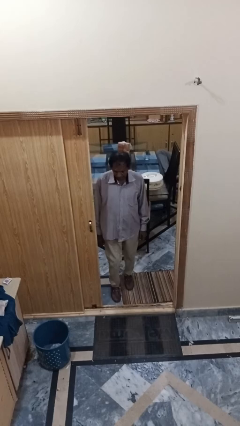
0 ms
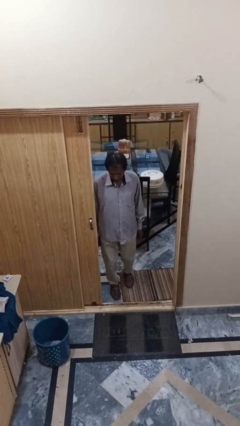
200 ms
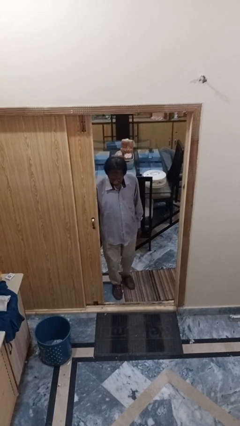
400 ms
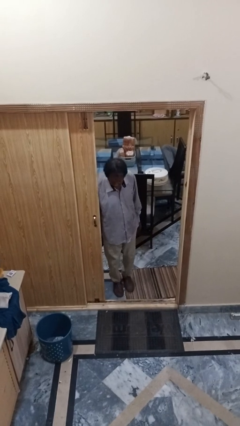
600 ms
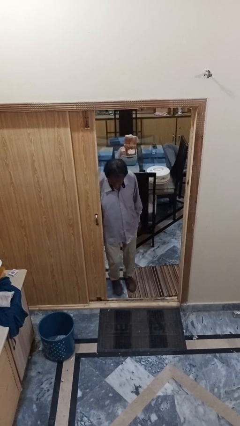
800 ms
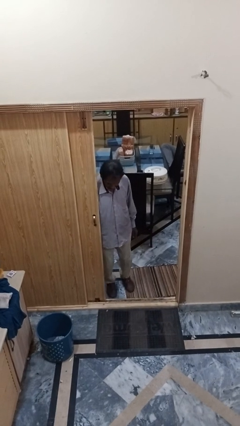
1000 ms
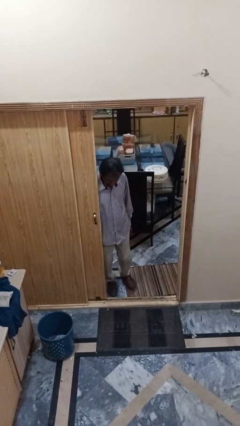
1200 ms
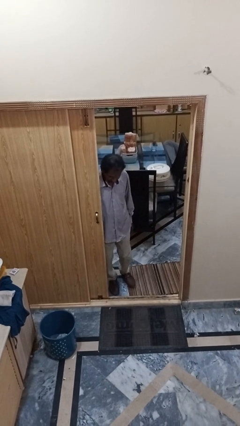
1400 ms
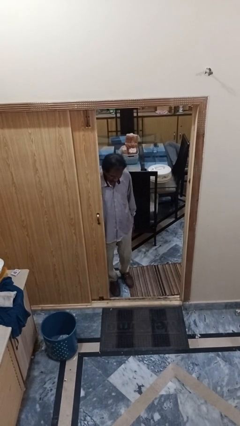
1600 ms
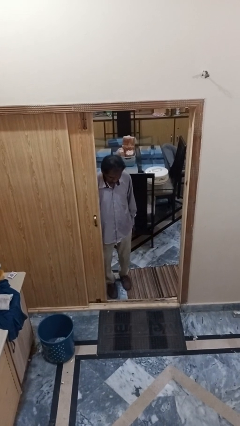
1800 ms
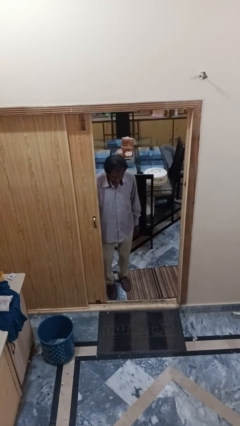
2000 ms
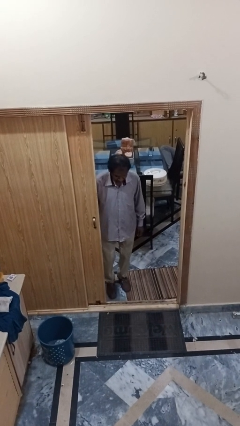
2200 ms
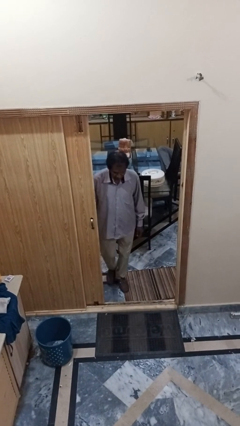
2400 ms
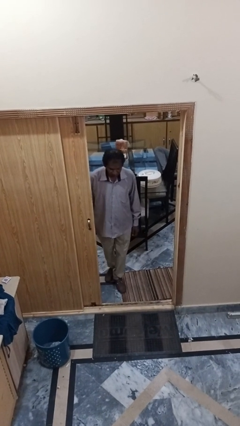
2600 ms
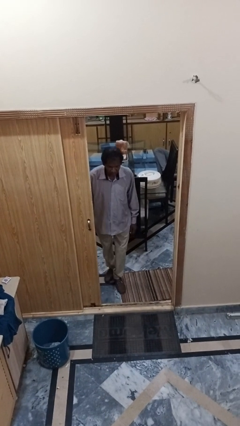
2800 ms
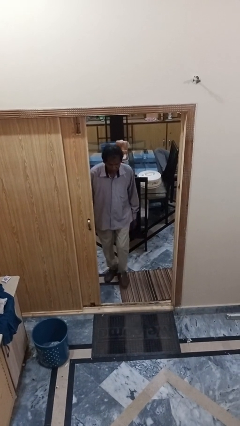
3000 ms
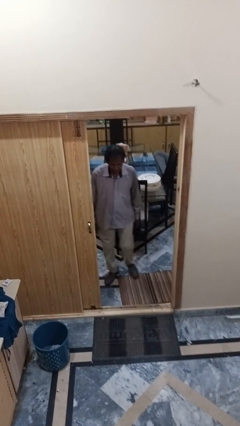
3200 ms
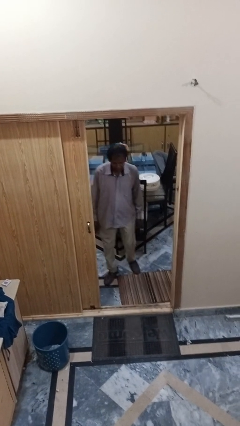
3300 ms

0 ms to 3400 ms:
person bumps into wall

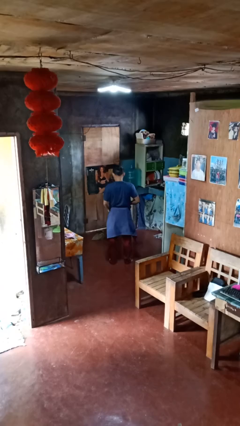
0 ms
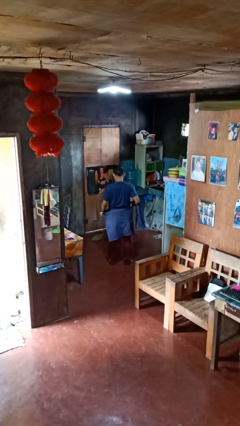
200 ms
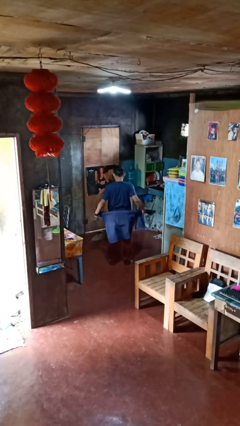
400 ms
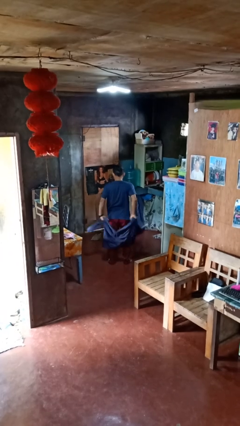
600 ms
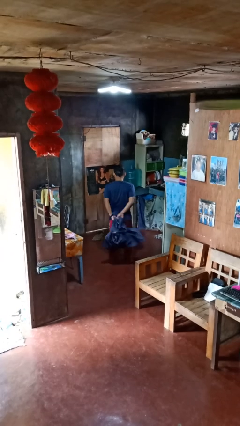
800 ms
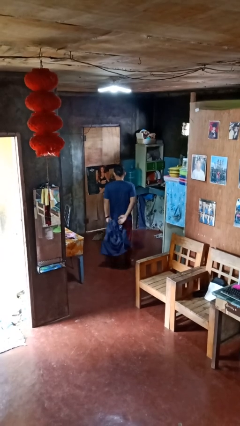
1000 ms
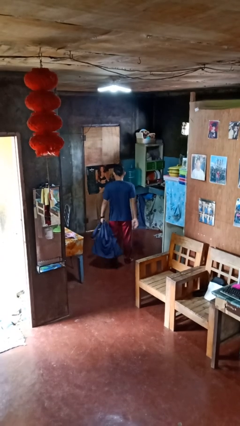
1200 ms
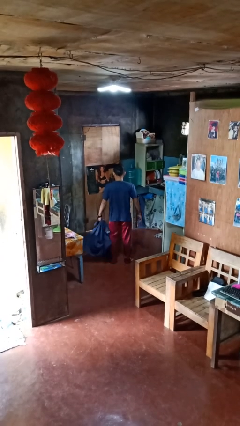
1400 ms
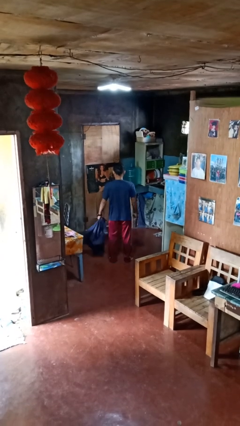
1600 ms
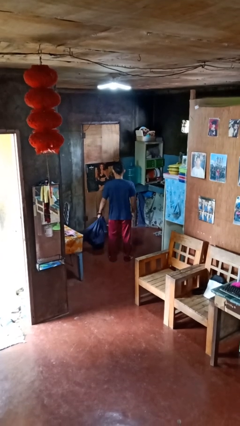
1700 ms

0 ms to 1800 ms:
person unties jacket around waist

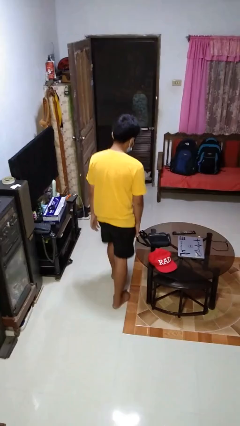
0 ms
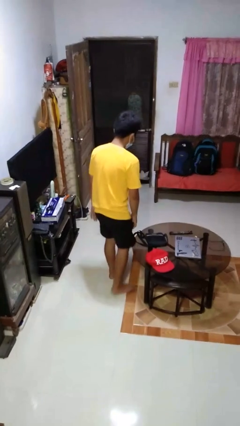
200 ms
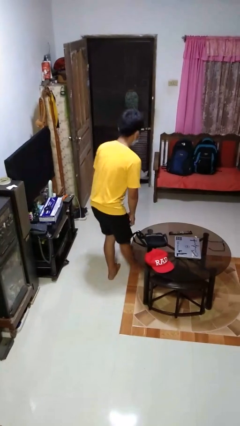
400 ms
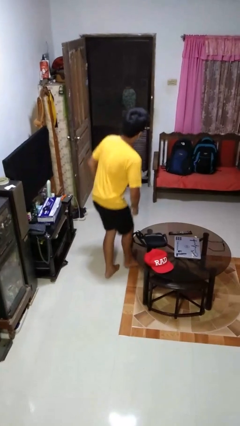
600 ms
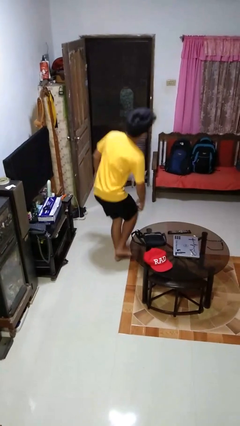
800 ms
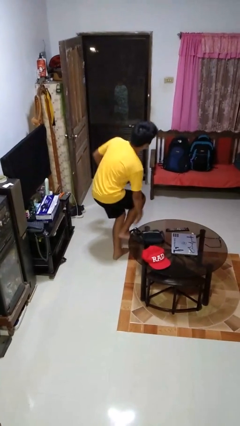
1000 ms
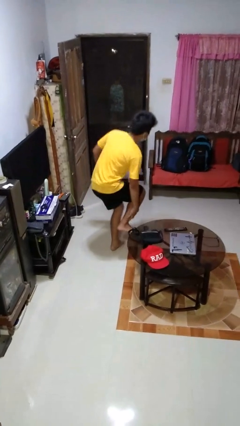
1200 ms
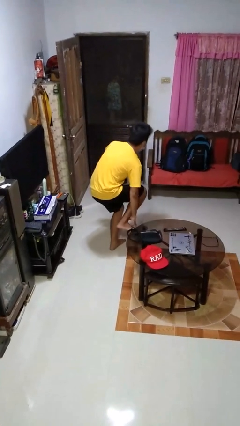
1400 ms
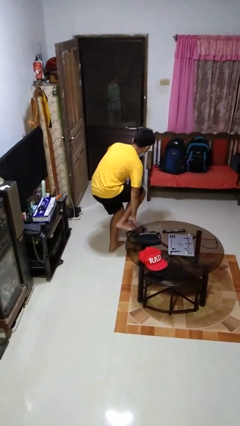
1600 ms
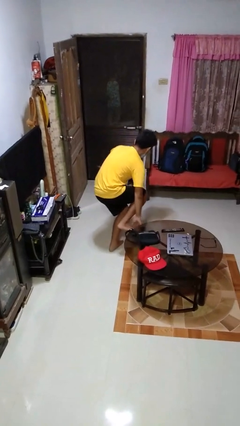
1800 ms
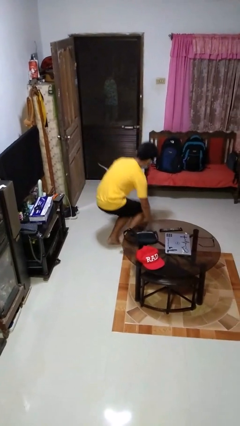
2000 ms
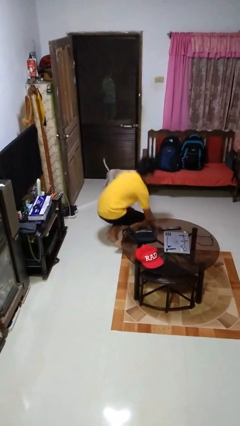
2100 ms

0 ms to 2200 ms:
person trips on object on floor

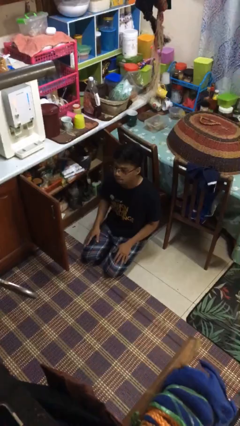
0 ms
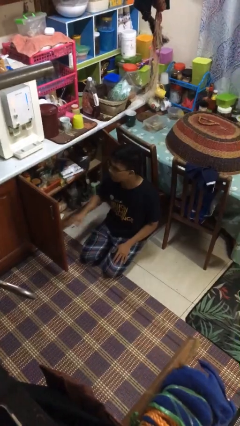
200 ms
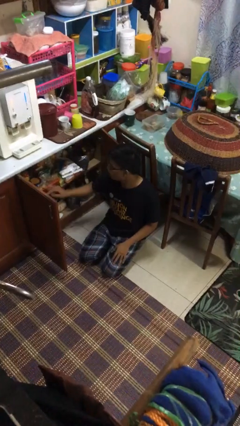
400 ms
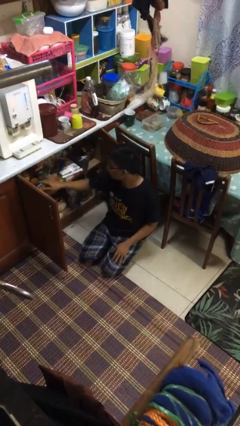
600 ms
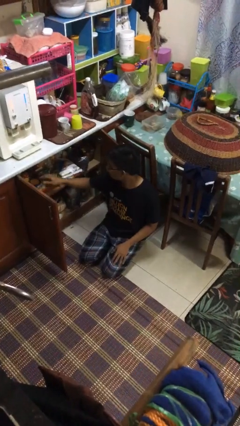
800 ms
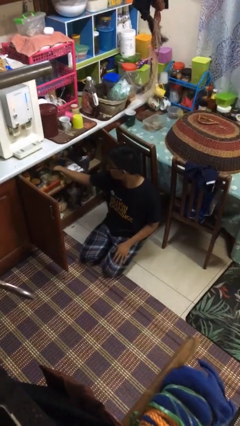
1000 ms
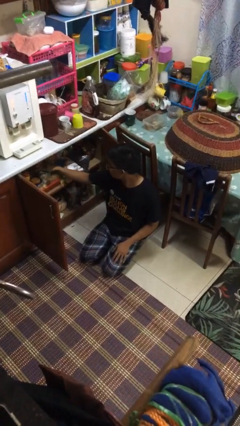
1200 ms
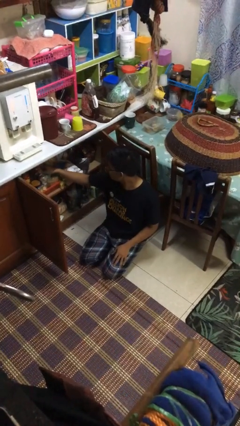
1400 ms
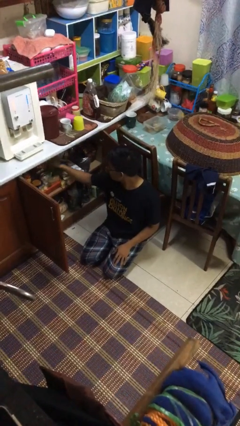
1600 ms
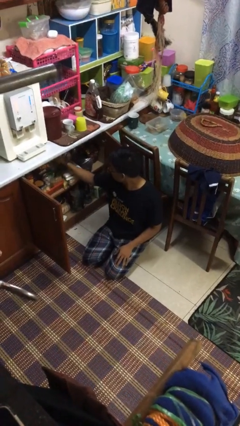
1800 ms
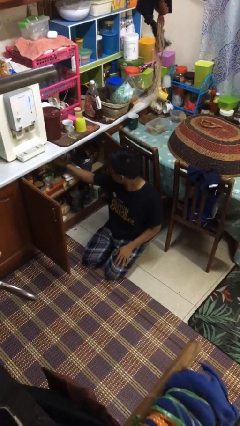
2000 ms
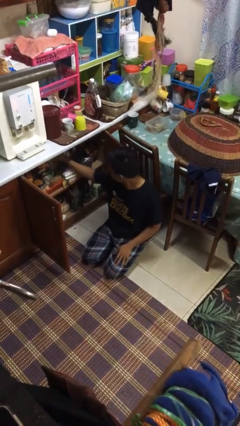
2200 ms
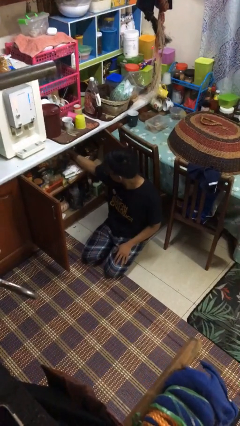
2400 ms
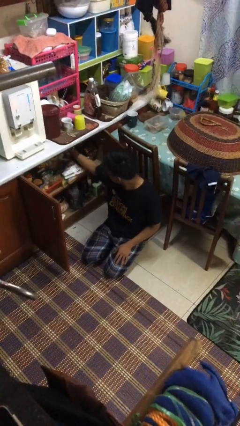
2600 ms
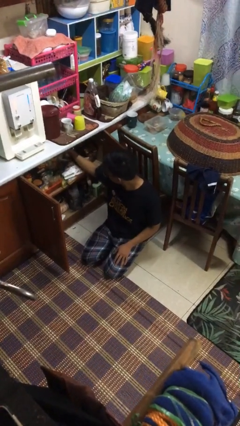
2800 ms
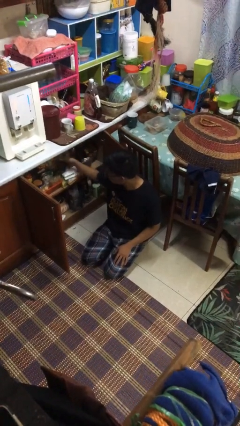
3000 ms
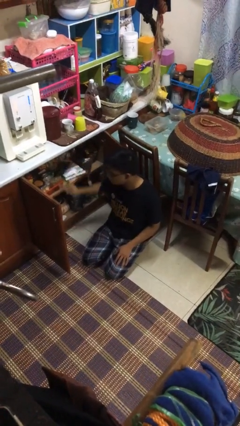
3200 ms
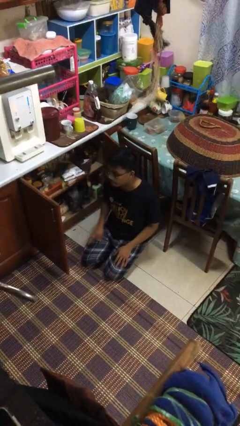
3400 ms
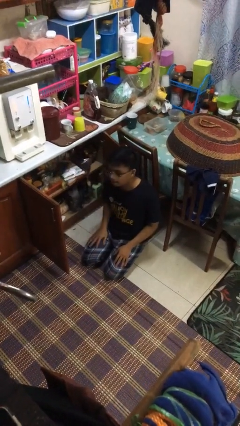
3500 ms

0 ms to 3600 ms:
person searches in kitchen drawer

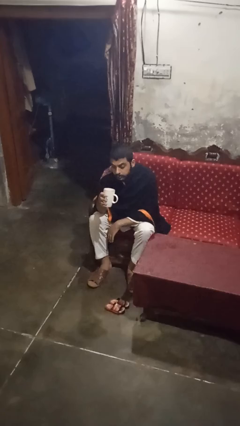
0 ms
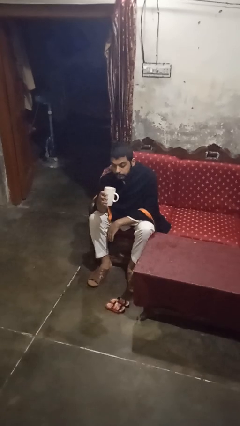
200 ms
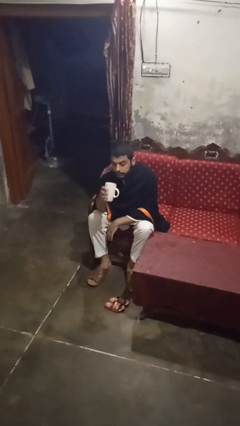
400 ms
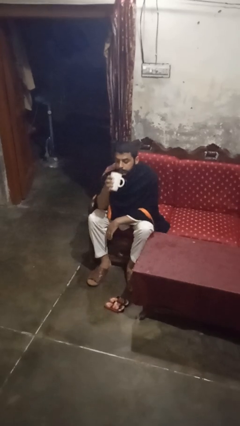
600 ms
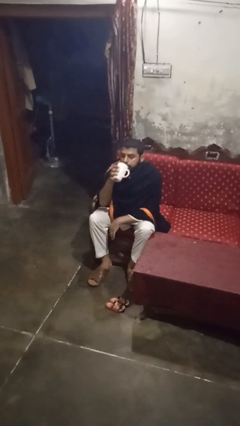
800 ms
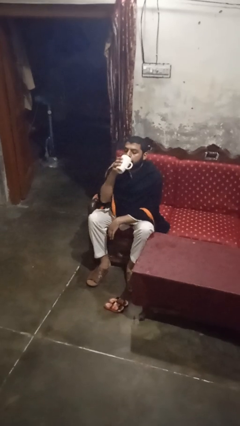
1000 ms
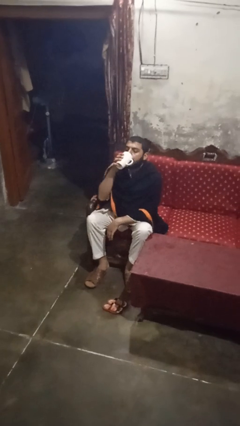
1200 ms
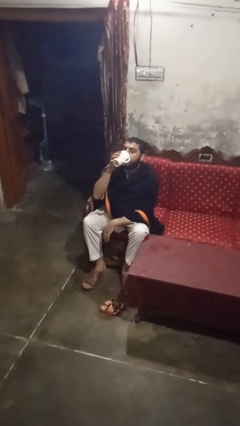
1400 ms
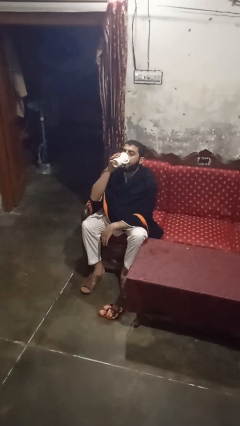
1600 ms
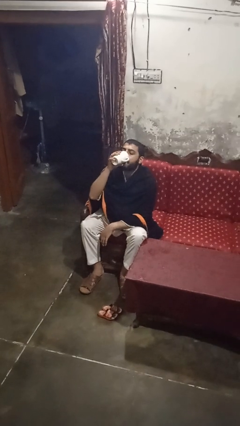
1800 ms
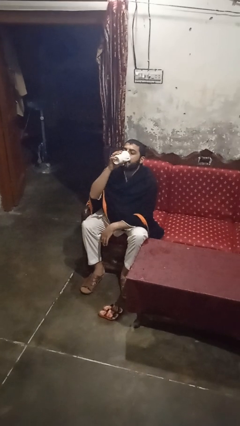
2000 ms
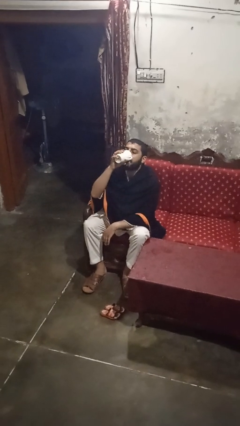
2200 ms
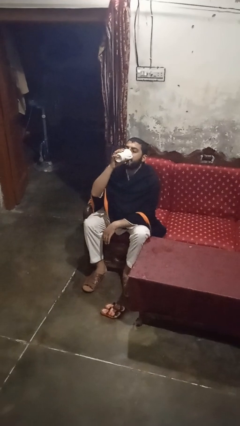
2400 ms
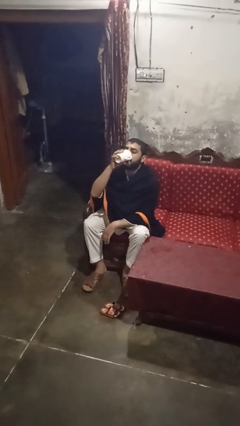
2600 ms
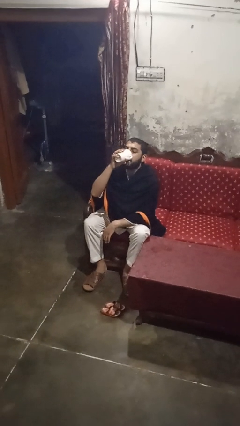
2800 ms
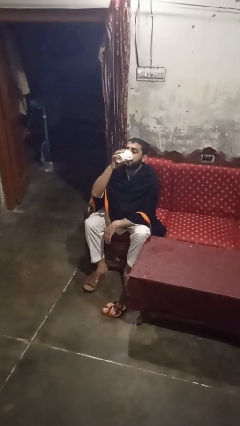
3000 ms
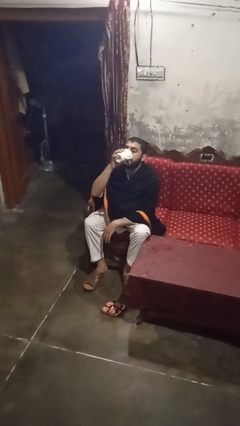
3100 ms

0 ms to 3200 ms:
person drinks from mug

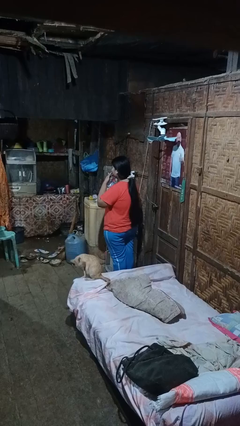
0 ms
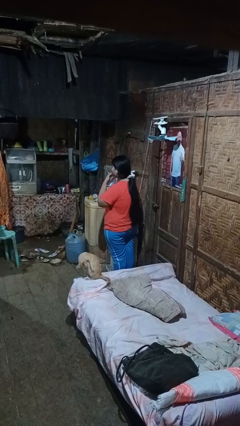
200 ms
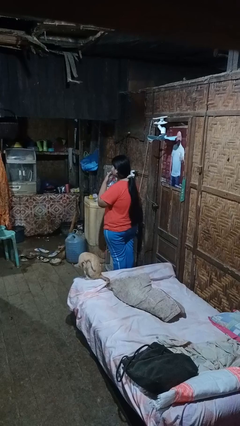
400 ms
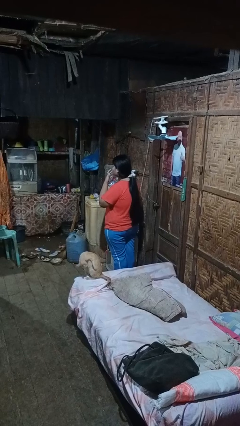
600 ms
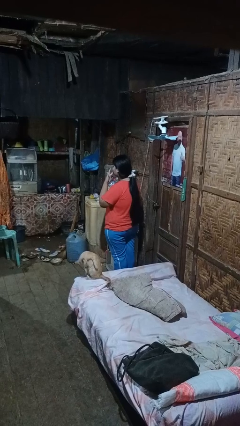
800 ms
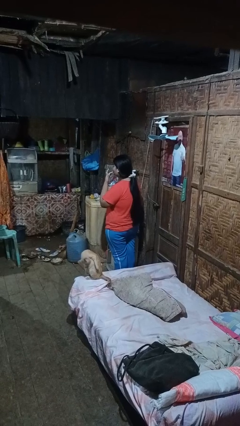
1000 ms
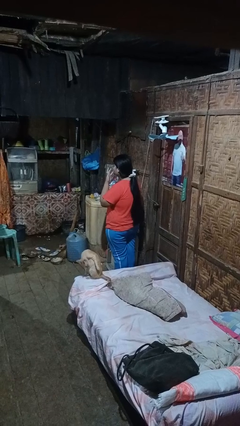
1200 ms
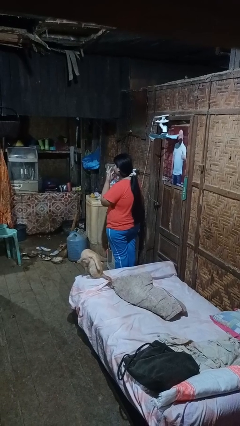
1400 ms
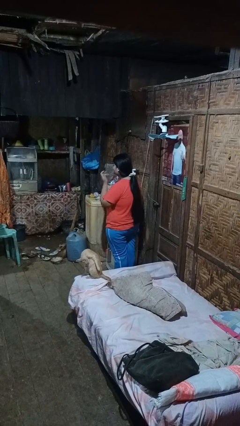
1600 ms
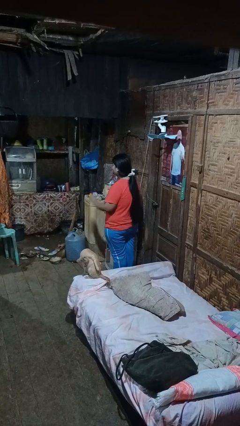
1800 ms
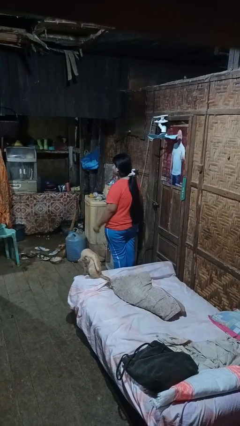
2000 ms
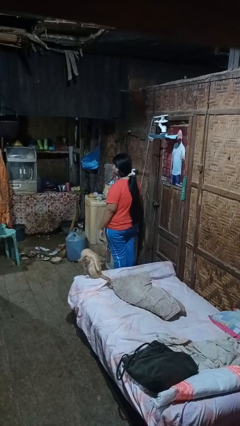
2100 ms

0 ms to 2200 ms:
person licks fingers

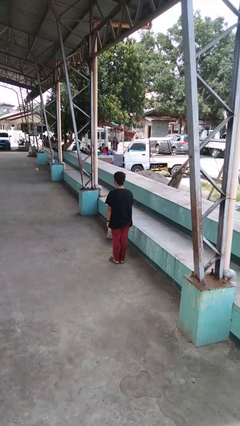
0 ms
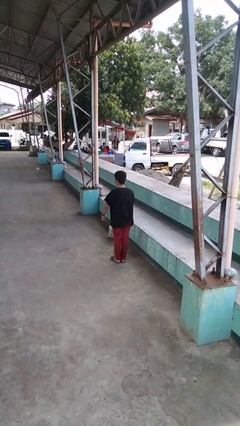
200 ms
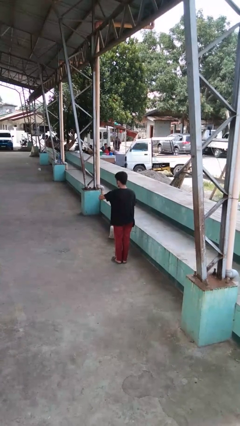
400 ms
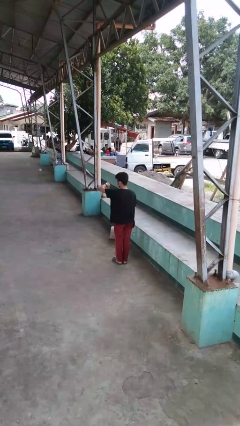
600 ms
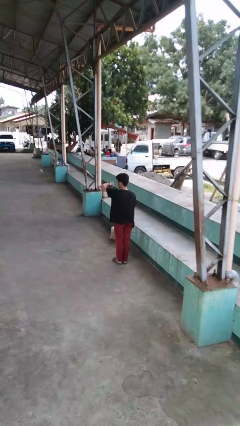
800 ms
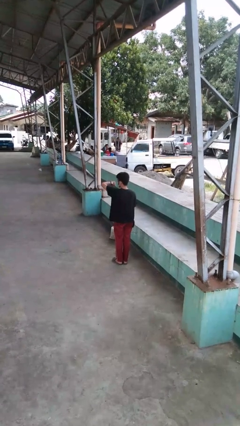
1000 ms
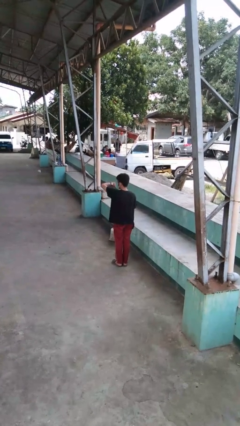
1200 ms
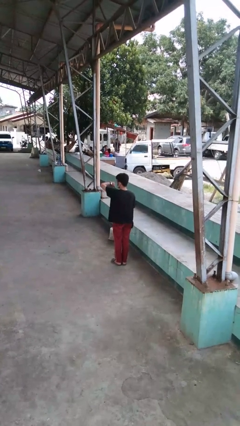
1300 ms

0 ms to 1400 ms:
person looks at wristwatch
